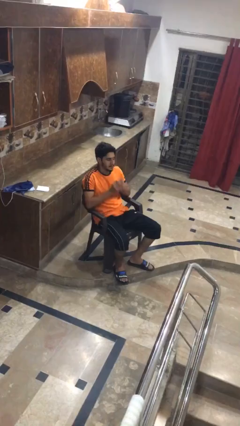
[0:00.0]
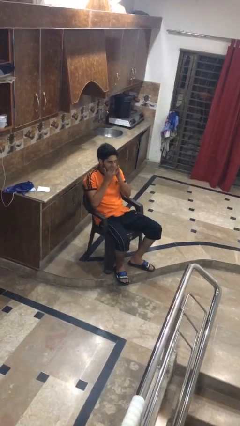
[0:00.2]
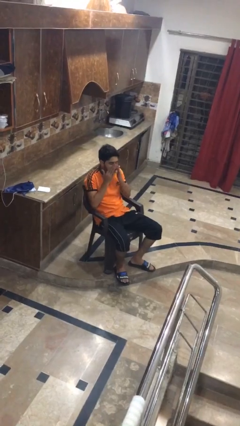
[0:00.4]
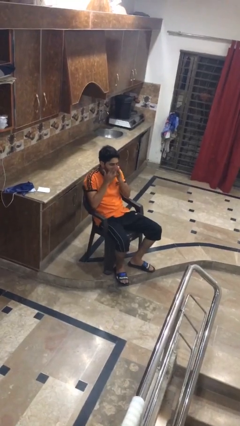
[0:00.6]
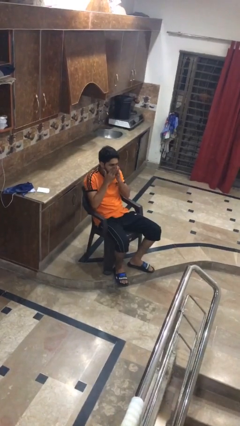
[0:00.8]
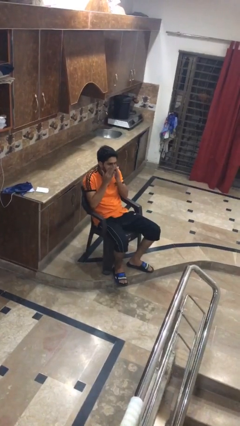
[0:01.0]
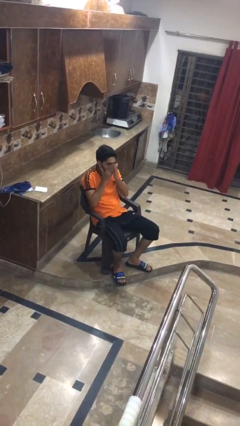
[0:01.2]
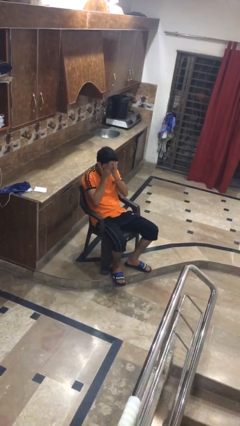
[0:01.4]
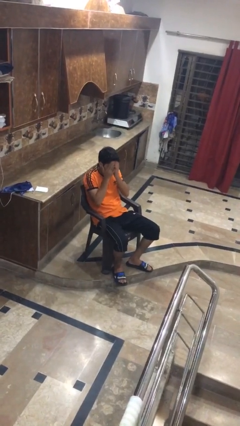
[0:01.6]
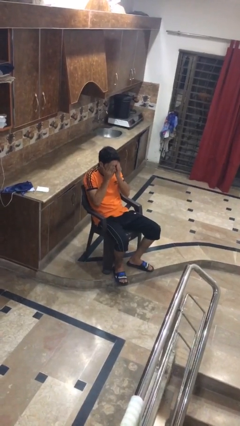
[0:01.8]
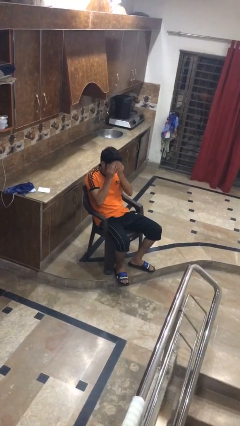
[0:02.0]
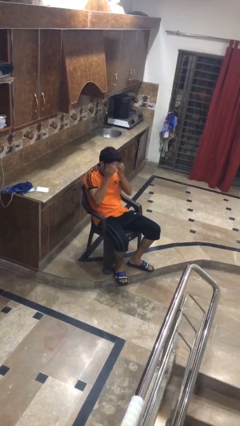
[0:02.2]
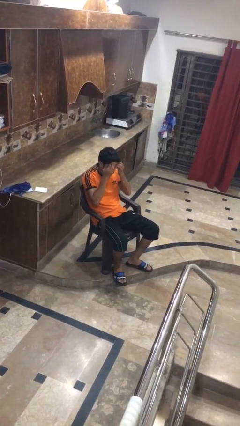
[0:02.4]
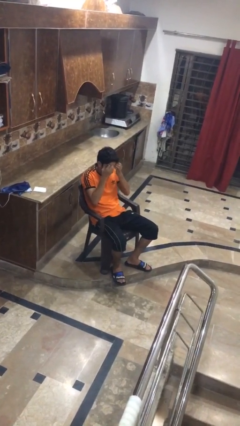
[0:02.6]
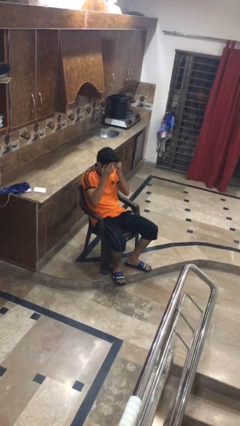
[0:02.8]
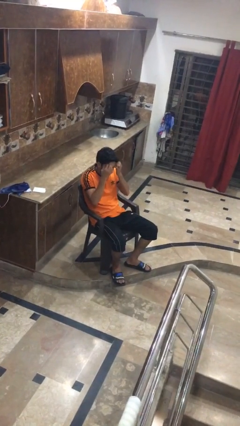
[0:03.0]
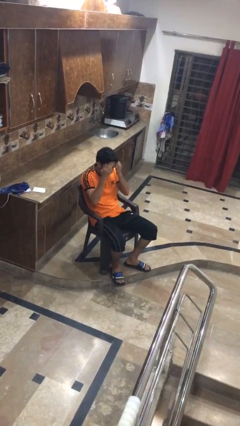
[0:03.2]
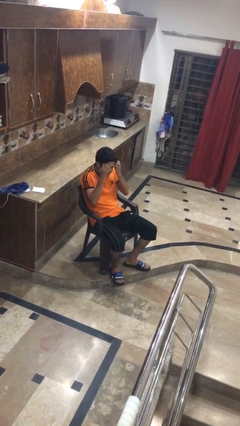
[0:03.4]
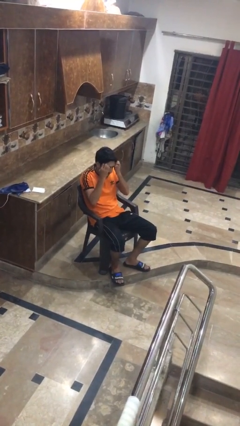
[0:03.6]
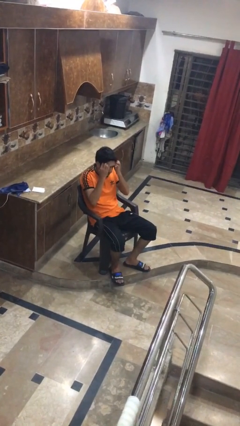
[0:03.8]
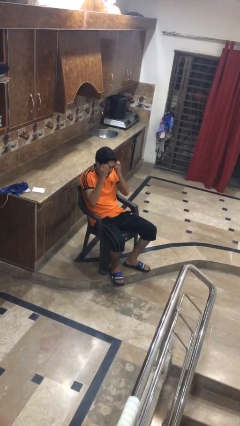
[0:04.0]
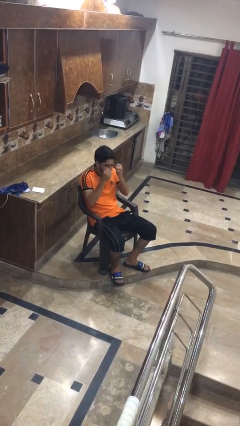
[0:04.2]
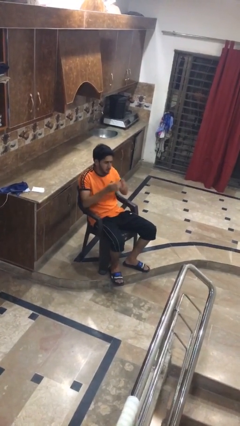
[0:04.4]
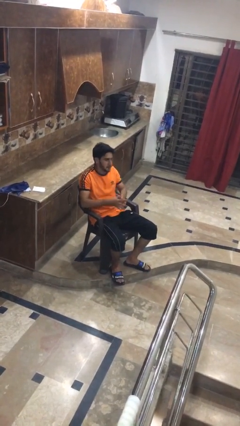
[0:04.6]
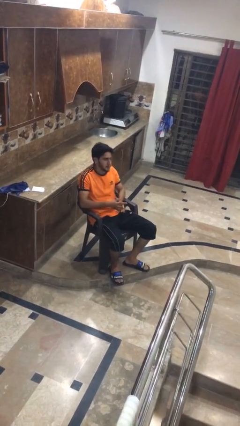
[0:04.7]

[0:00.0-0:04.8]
person scratches face

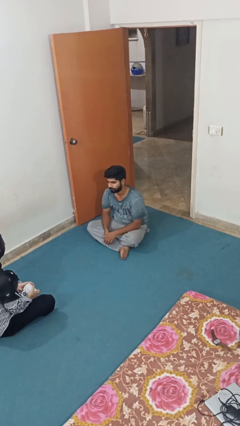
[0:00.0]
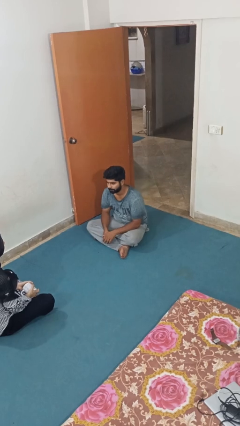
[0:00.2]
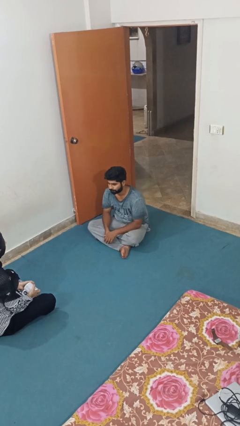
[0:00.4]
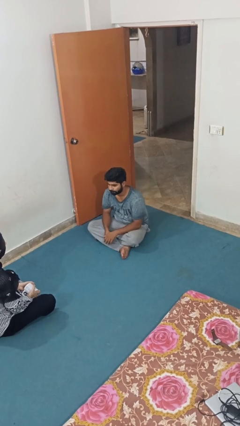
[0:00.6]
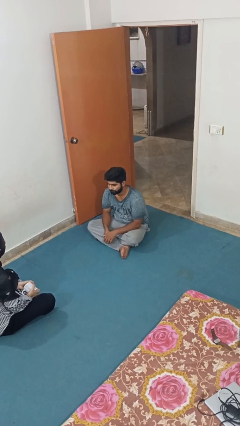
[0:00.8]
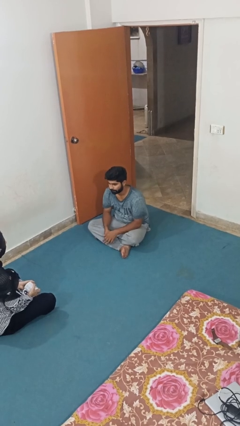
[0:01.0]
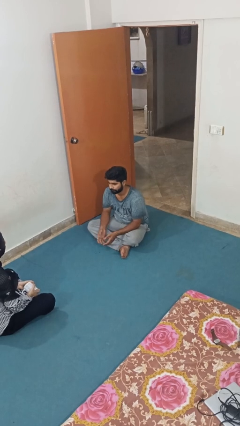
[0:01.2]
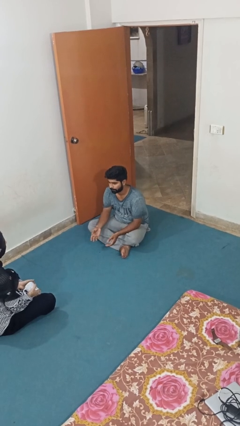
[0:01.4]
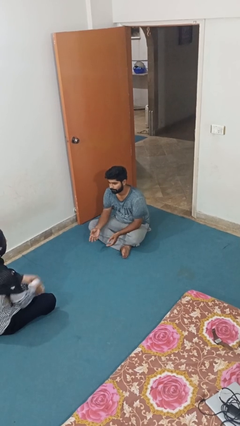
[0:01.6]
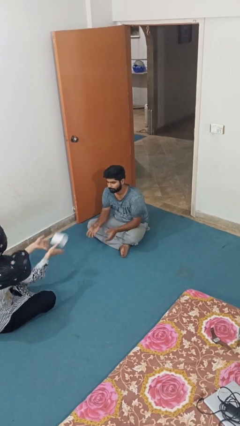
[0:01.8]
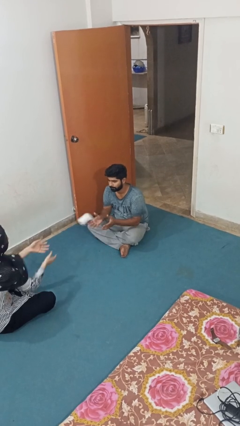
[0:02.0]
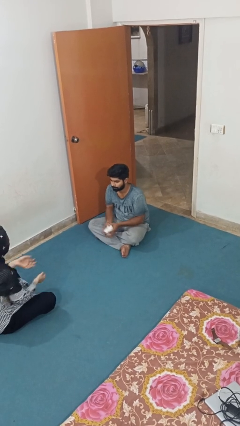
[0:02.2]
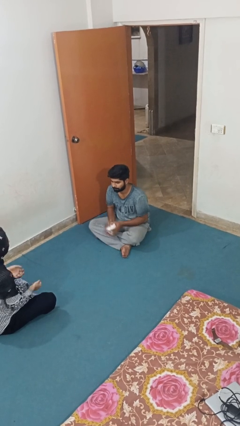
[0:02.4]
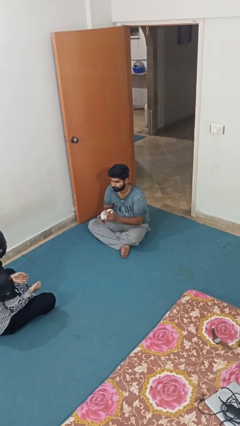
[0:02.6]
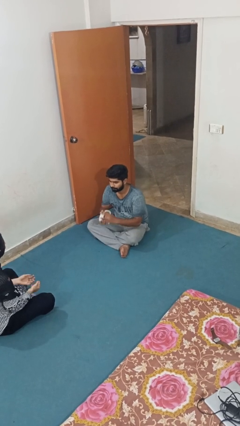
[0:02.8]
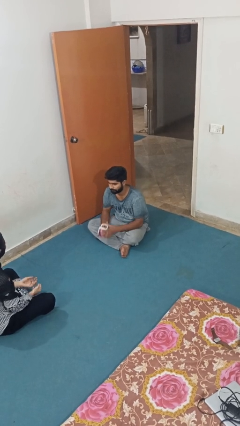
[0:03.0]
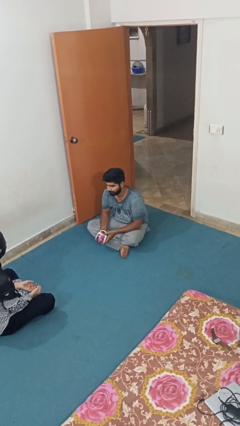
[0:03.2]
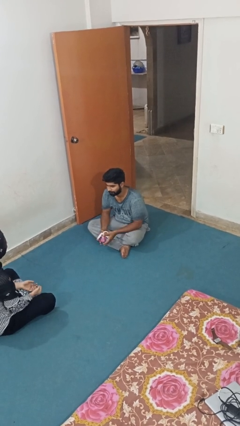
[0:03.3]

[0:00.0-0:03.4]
person catches object from person

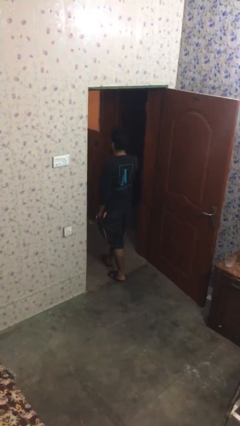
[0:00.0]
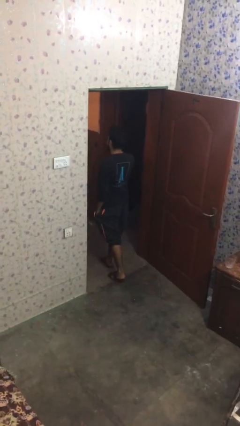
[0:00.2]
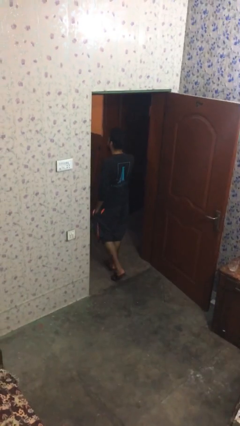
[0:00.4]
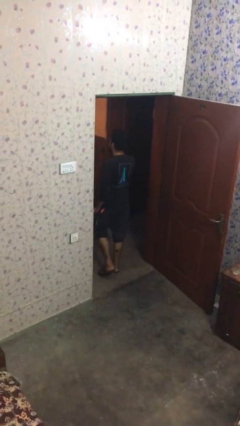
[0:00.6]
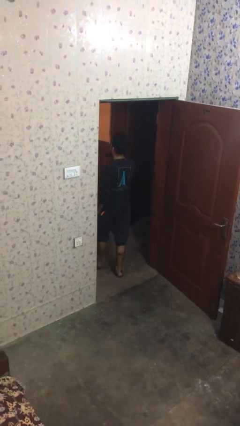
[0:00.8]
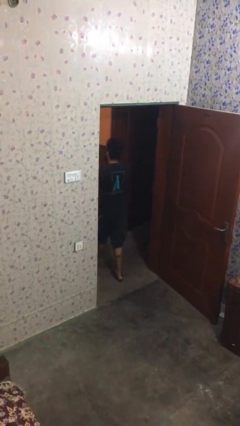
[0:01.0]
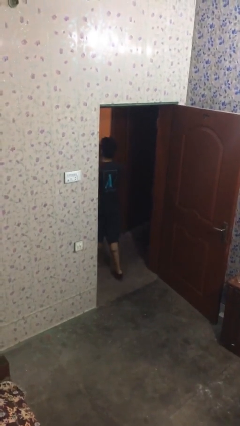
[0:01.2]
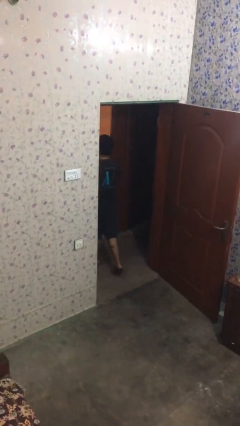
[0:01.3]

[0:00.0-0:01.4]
person exits scene through structure

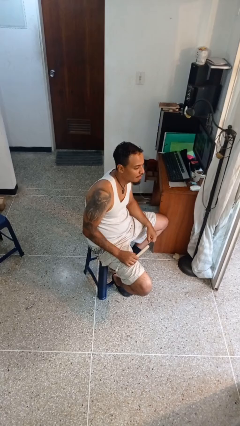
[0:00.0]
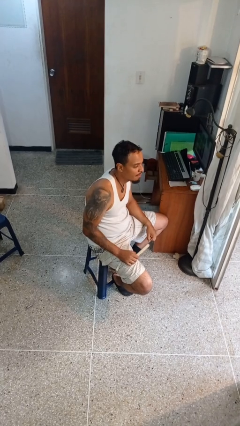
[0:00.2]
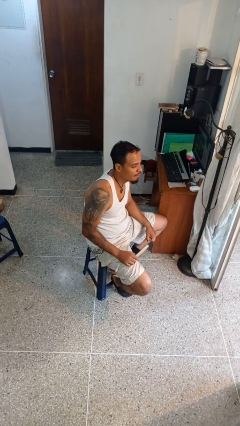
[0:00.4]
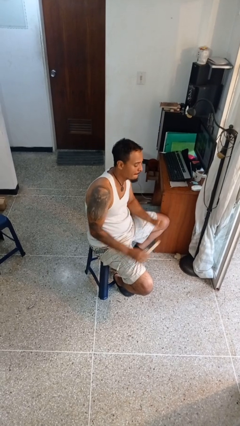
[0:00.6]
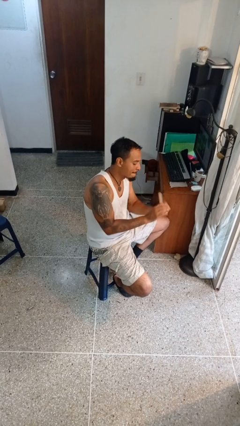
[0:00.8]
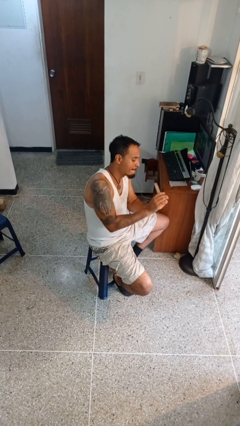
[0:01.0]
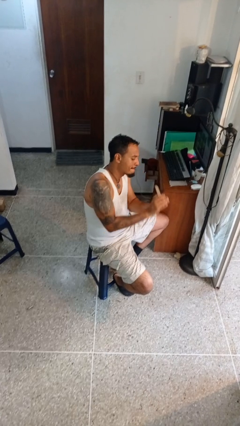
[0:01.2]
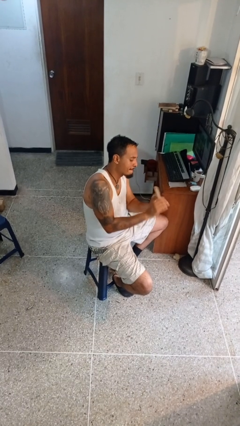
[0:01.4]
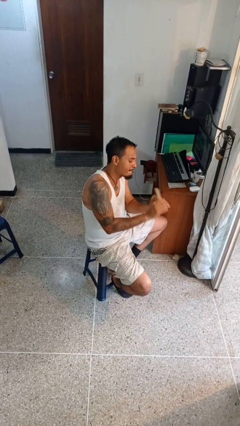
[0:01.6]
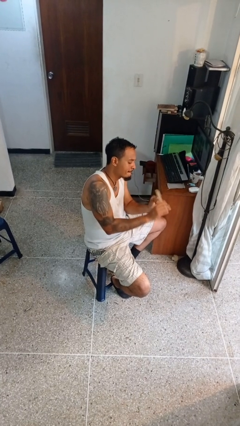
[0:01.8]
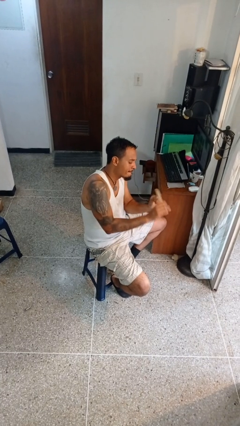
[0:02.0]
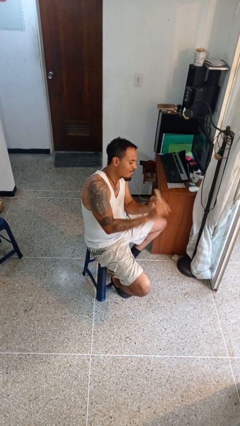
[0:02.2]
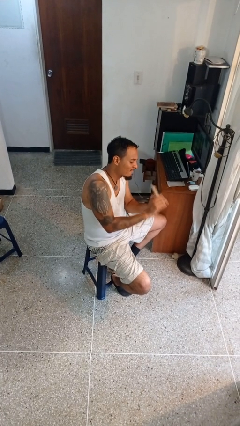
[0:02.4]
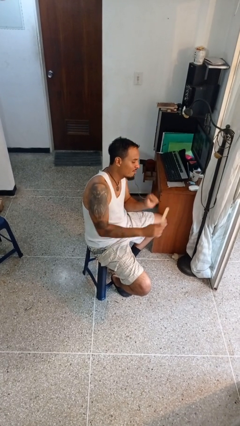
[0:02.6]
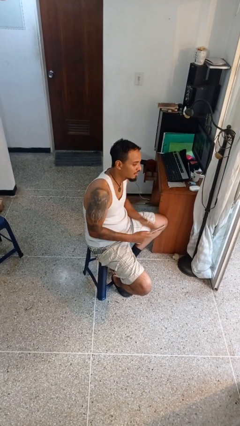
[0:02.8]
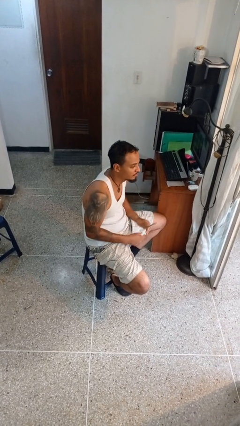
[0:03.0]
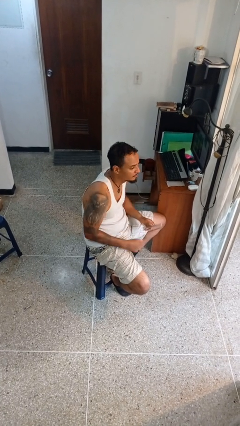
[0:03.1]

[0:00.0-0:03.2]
person files fingernails

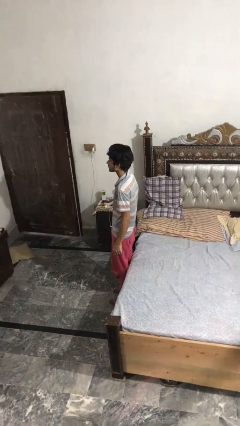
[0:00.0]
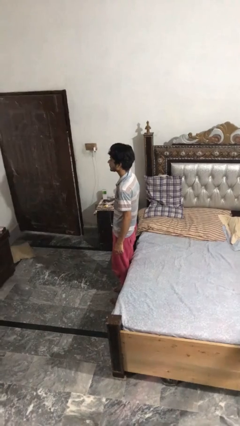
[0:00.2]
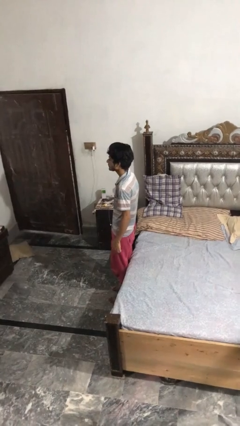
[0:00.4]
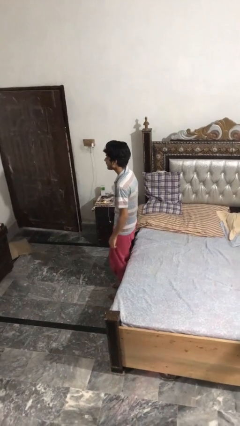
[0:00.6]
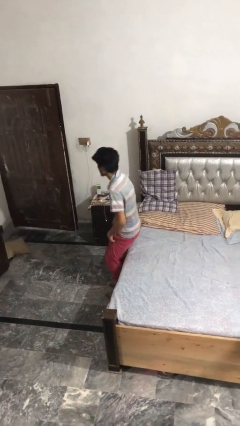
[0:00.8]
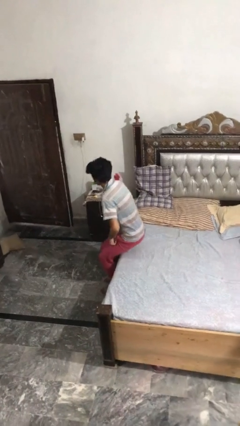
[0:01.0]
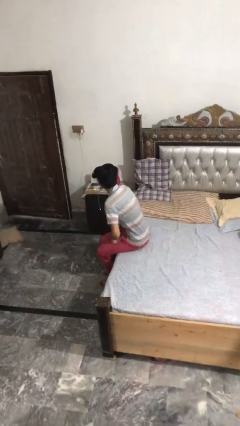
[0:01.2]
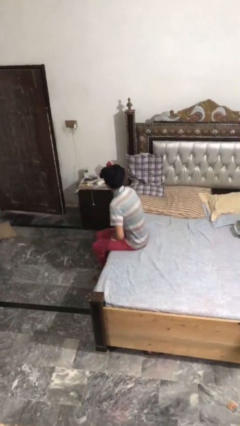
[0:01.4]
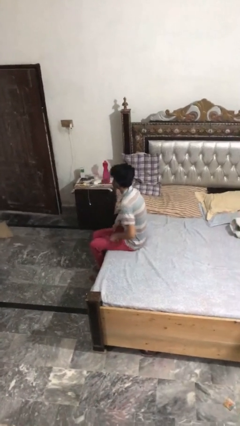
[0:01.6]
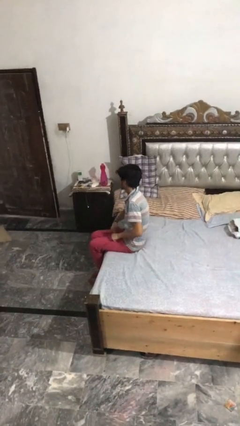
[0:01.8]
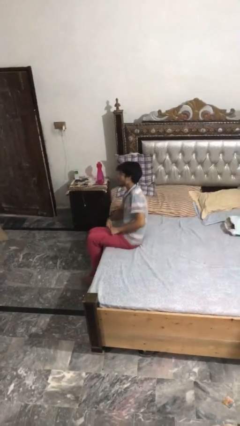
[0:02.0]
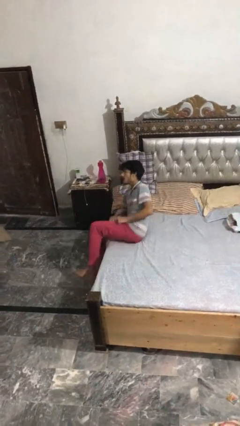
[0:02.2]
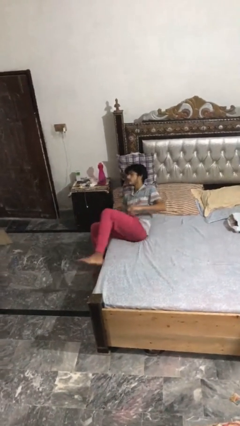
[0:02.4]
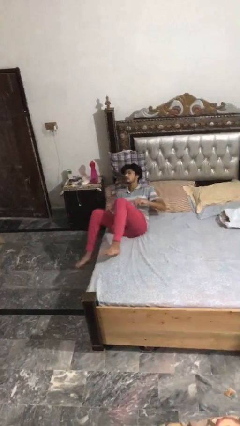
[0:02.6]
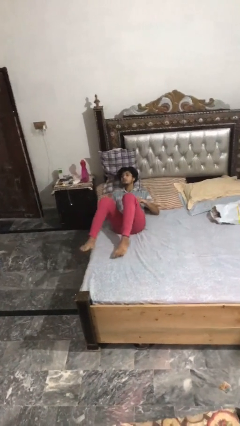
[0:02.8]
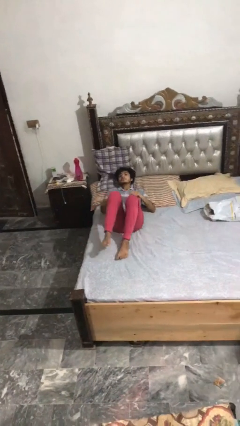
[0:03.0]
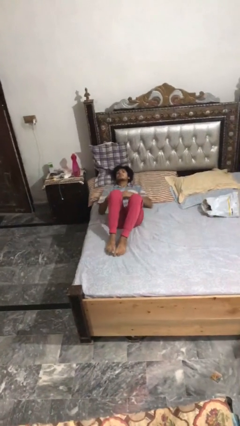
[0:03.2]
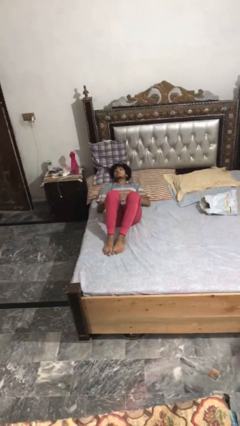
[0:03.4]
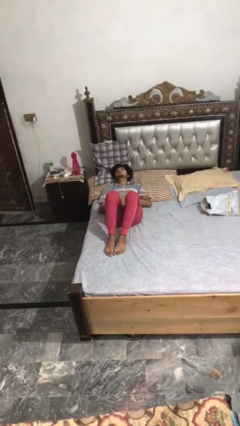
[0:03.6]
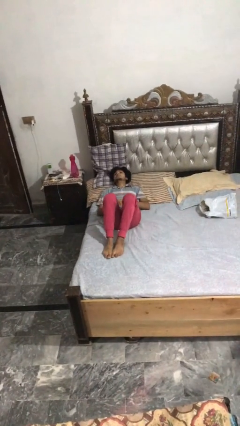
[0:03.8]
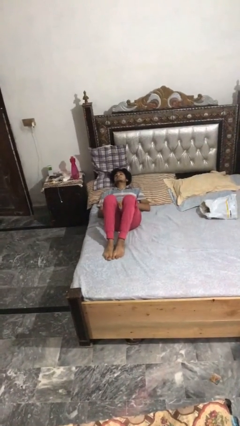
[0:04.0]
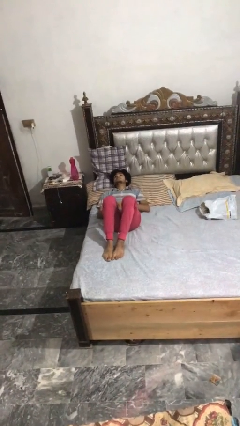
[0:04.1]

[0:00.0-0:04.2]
person lies down on bed

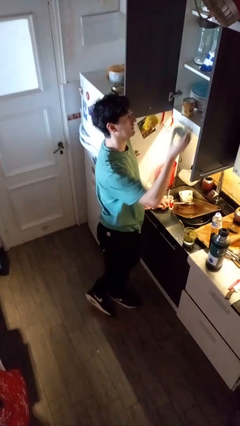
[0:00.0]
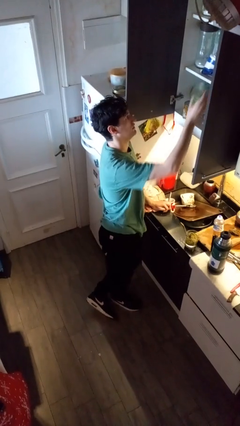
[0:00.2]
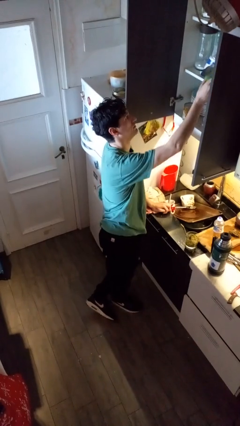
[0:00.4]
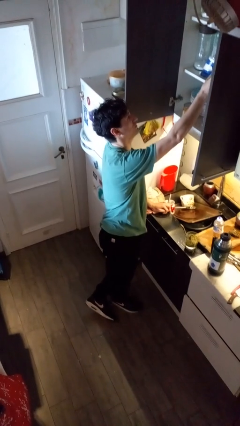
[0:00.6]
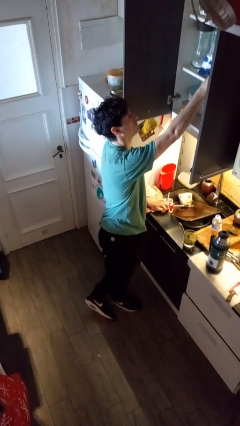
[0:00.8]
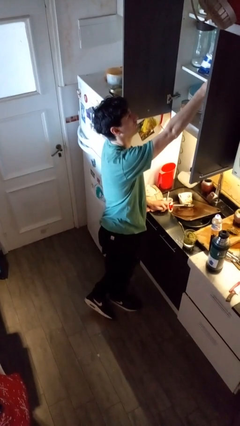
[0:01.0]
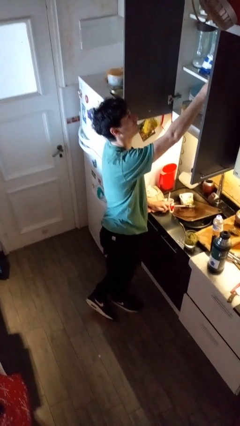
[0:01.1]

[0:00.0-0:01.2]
person puts object into kitchen drawer
